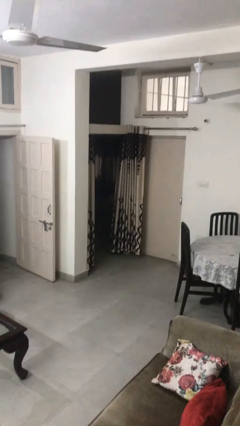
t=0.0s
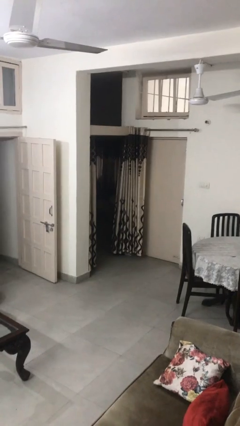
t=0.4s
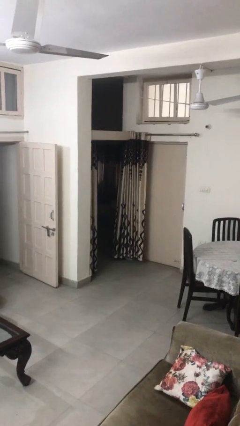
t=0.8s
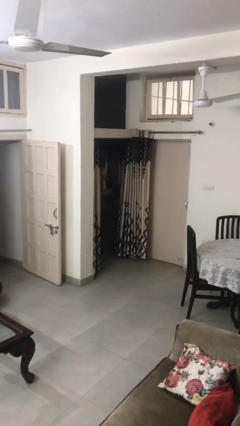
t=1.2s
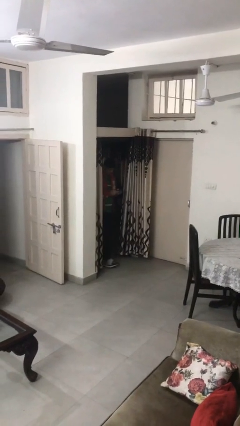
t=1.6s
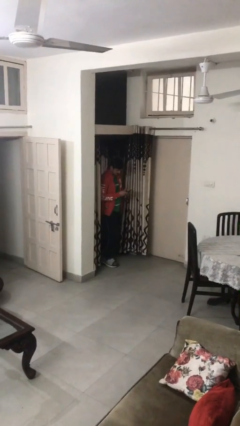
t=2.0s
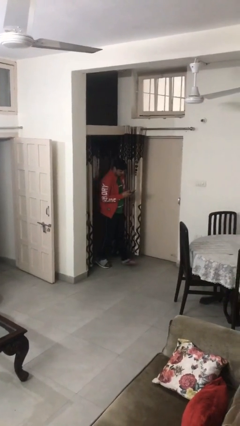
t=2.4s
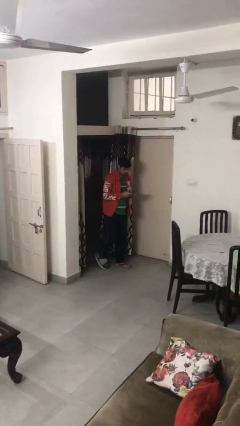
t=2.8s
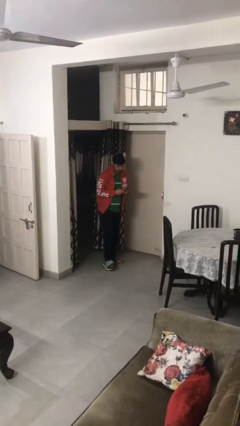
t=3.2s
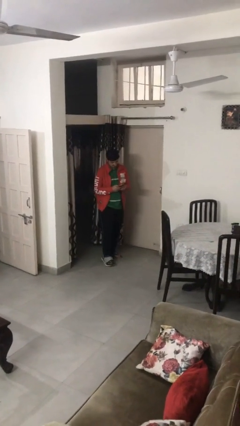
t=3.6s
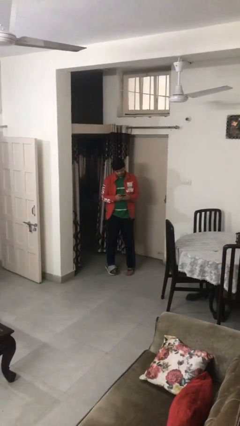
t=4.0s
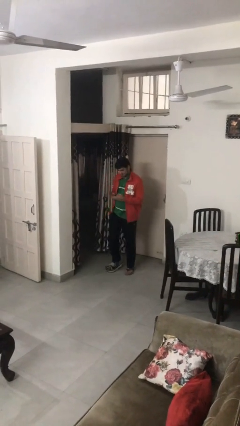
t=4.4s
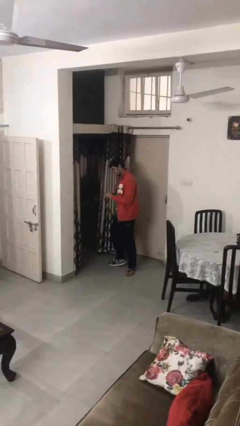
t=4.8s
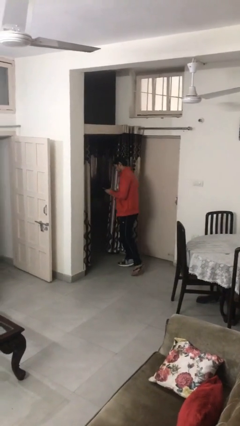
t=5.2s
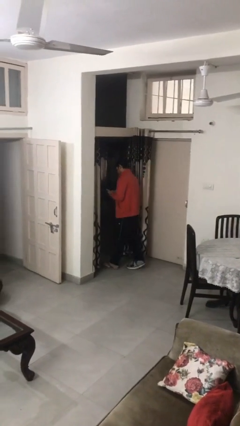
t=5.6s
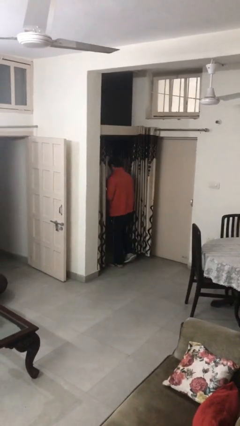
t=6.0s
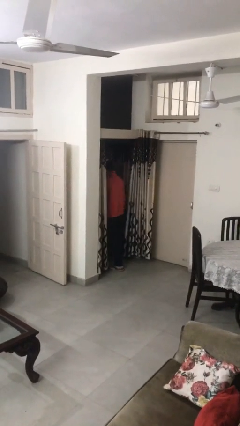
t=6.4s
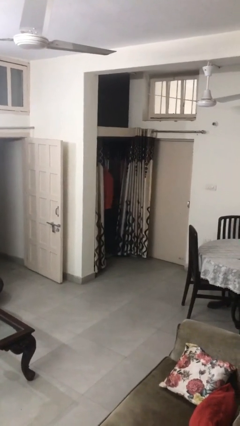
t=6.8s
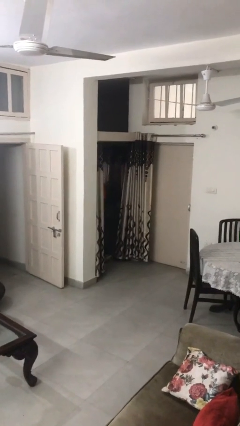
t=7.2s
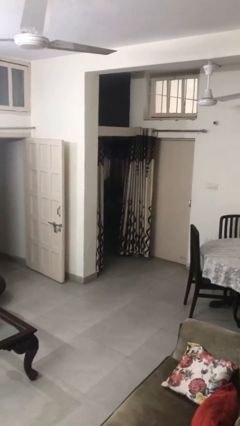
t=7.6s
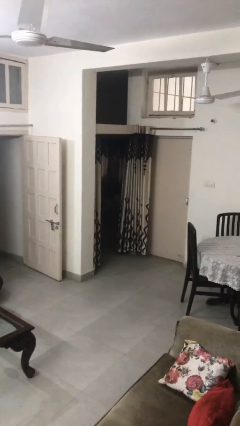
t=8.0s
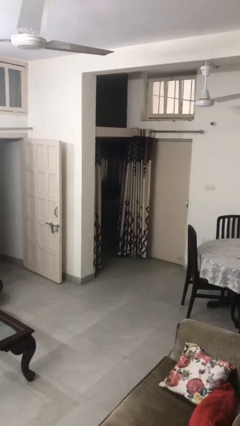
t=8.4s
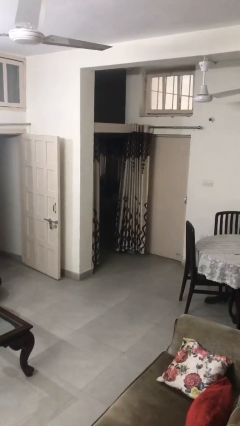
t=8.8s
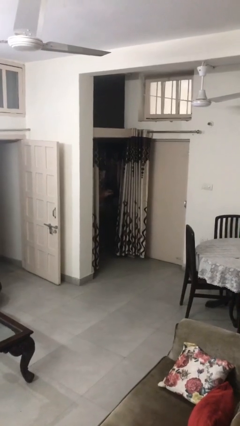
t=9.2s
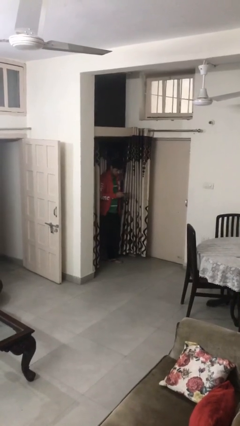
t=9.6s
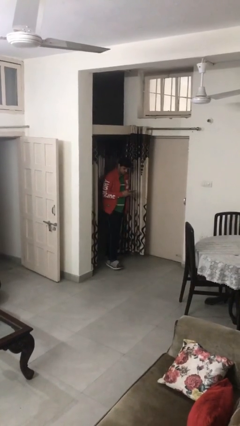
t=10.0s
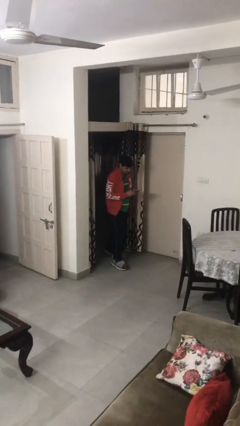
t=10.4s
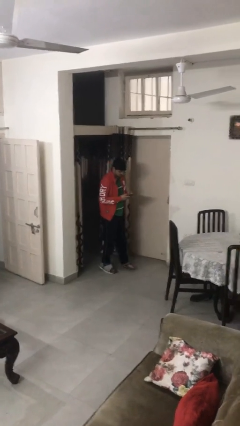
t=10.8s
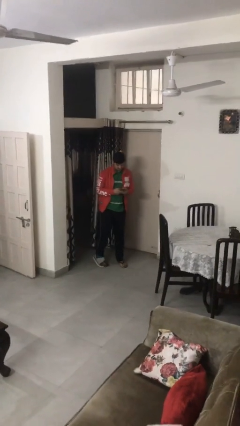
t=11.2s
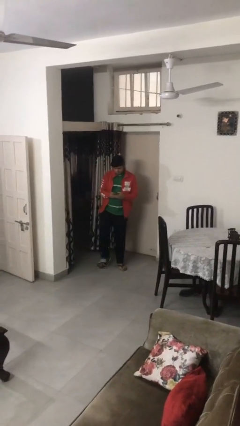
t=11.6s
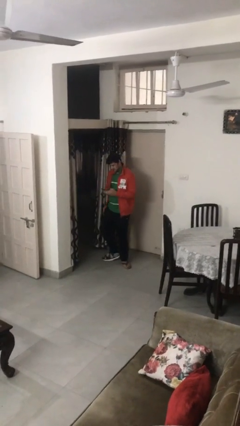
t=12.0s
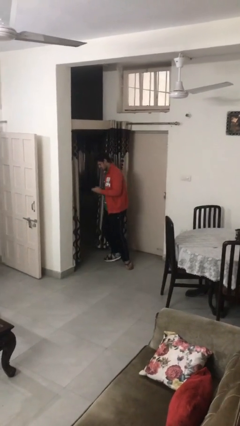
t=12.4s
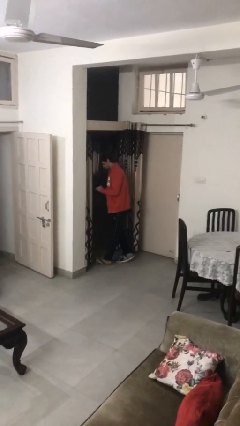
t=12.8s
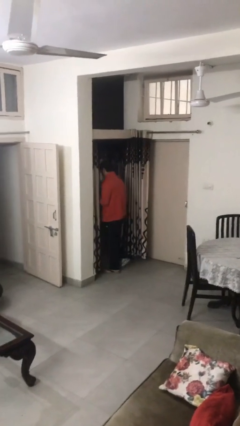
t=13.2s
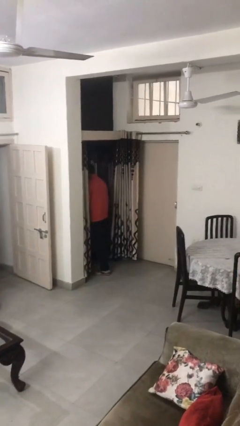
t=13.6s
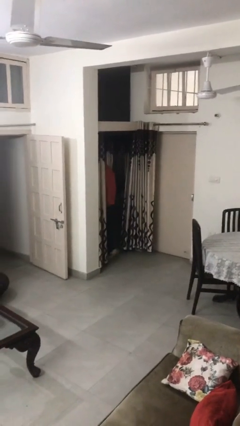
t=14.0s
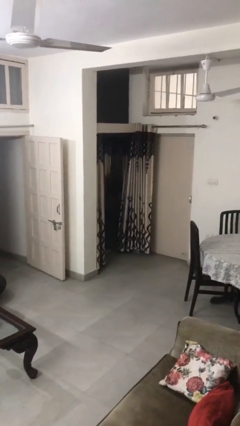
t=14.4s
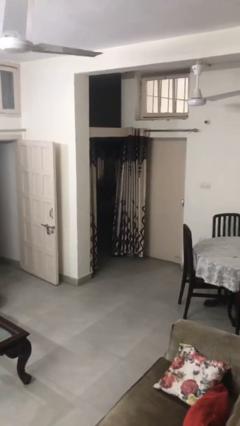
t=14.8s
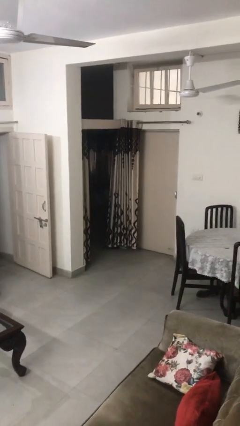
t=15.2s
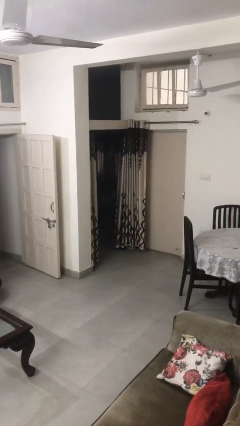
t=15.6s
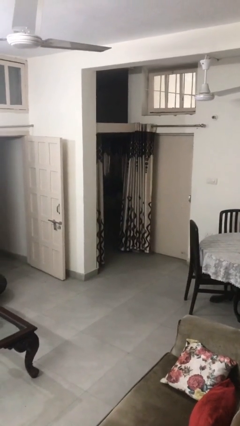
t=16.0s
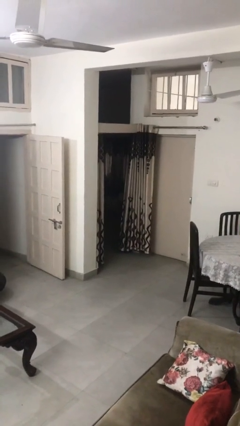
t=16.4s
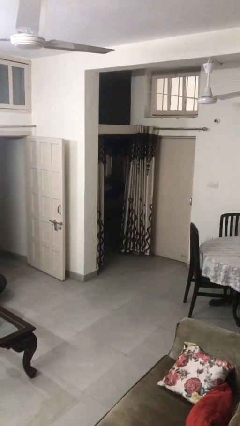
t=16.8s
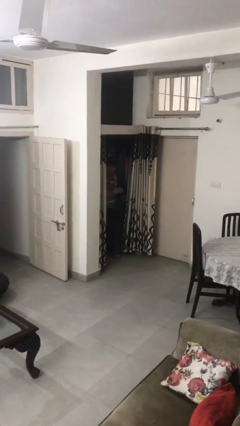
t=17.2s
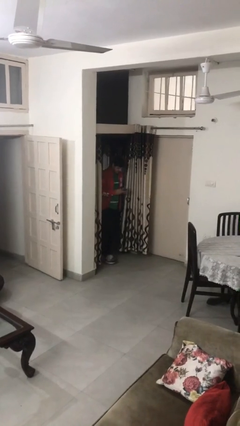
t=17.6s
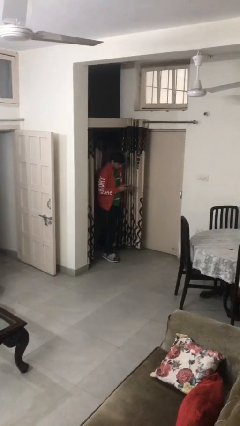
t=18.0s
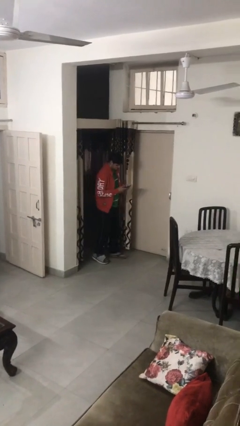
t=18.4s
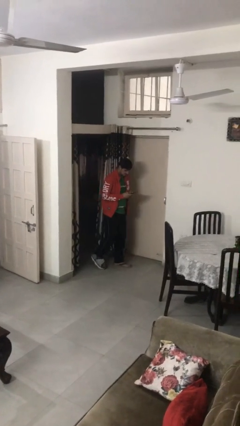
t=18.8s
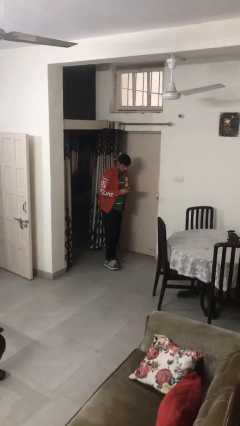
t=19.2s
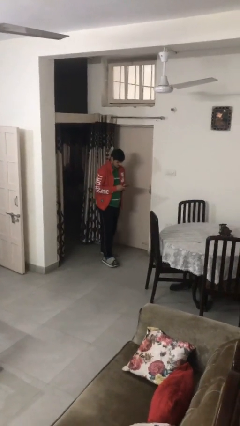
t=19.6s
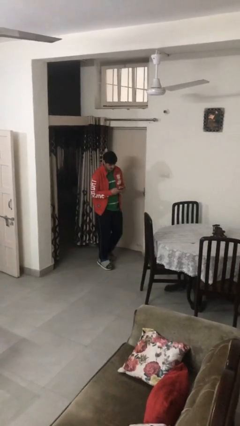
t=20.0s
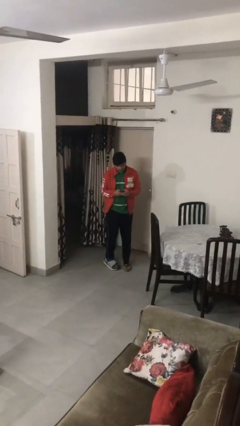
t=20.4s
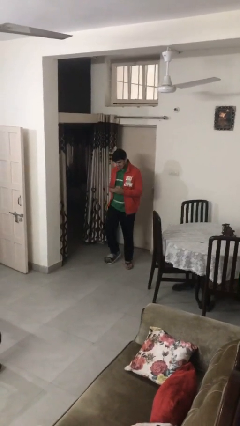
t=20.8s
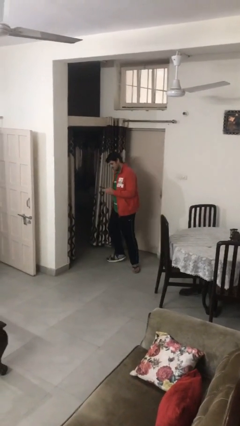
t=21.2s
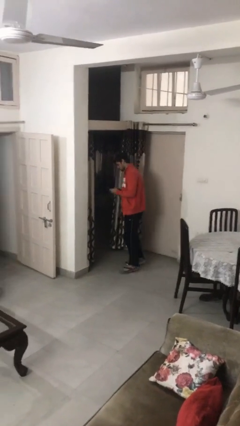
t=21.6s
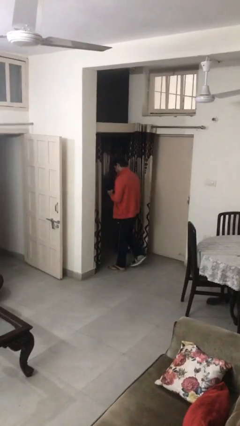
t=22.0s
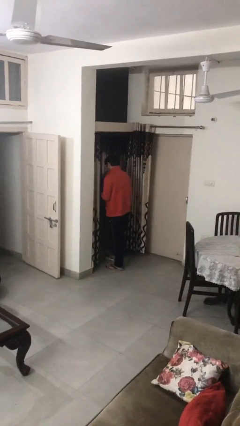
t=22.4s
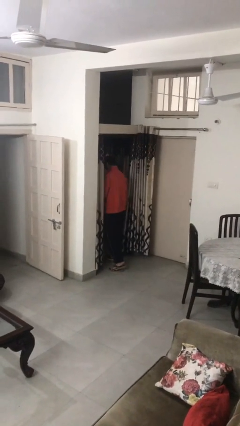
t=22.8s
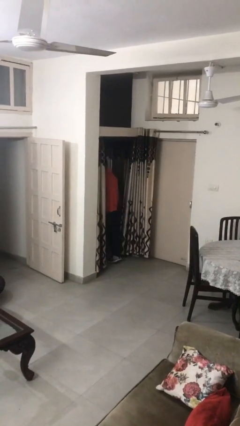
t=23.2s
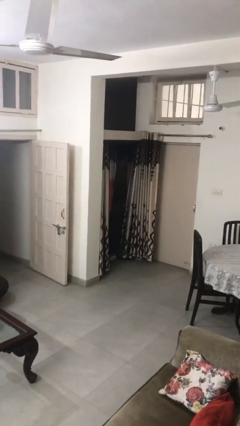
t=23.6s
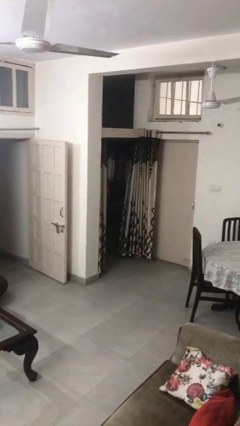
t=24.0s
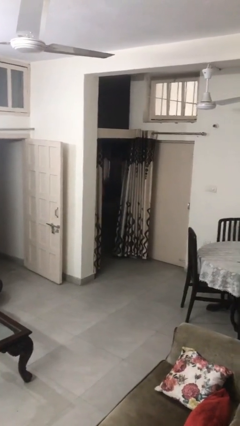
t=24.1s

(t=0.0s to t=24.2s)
person texts on phone

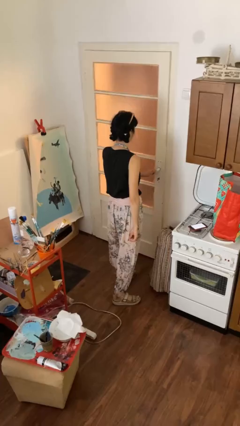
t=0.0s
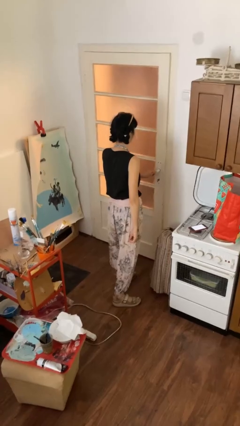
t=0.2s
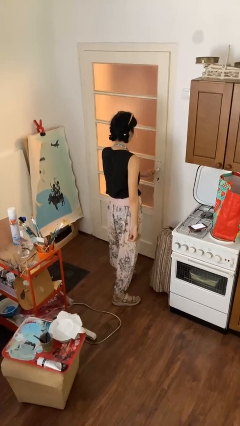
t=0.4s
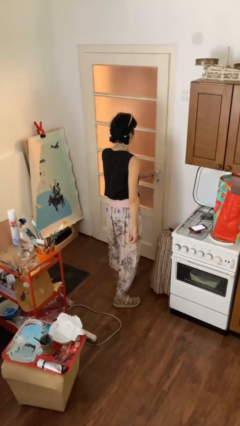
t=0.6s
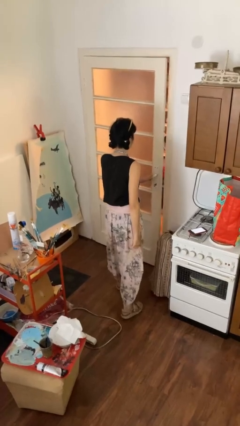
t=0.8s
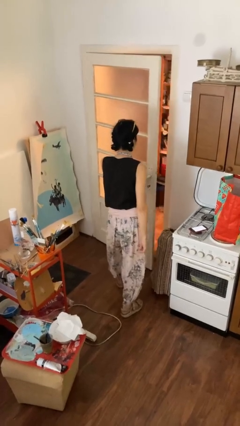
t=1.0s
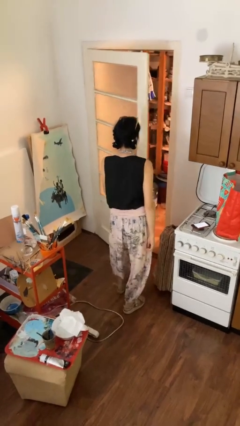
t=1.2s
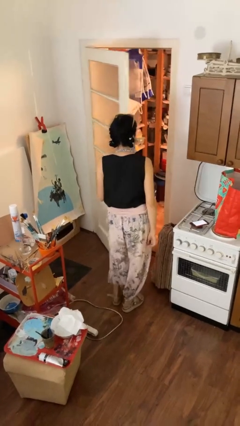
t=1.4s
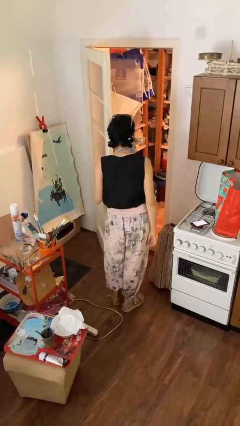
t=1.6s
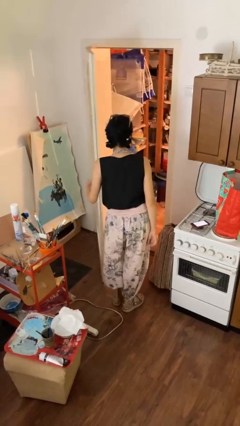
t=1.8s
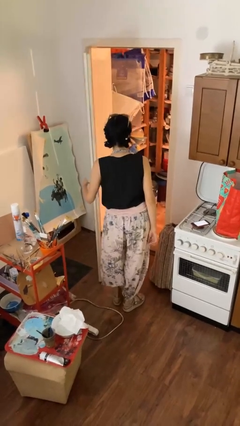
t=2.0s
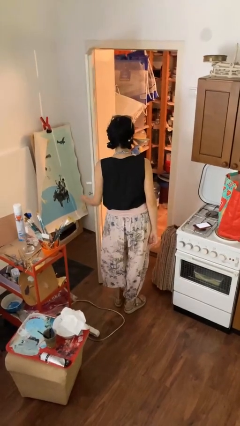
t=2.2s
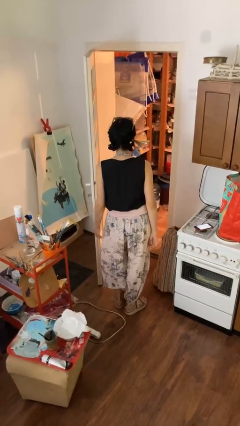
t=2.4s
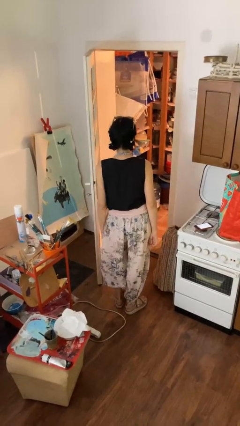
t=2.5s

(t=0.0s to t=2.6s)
person opens facility door

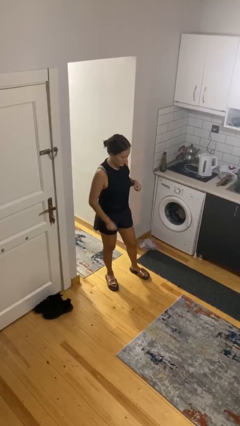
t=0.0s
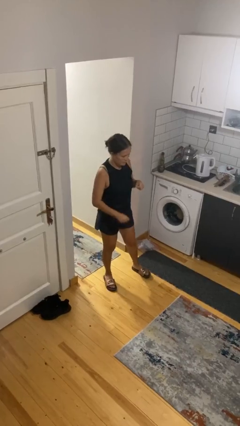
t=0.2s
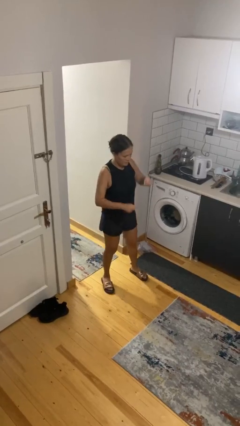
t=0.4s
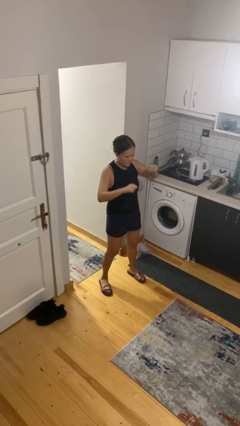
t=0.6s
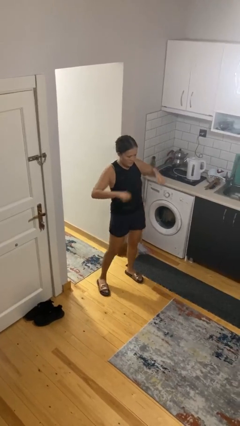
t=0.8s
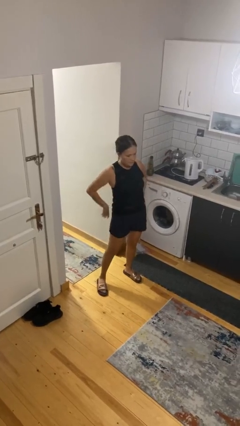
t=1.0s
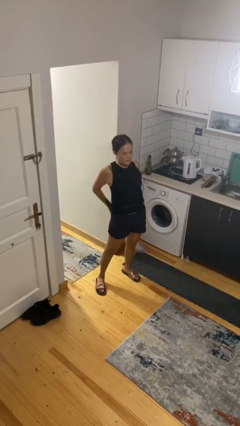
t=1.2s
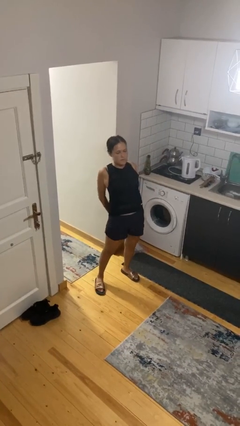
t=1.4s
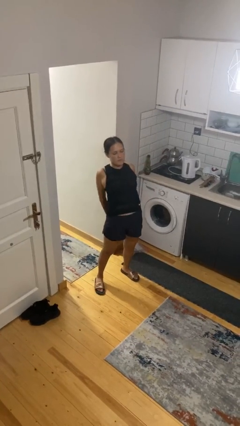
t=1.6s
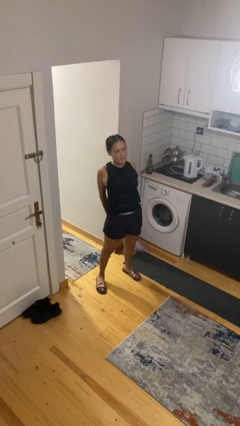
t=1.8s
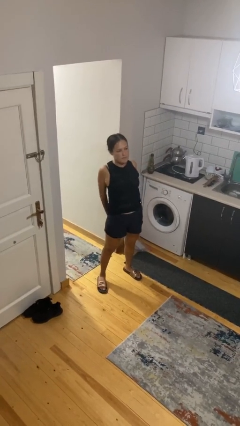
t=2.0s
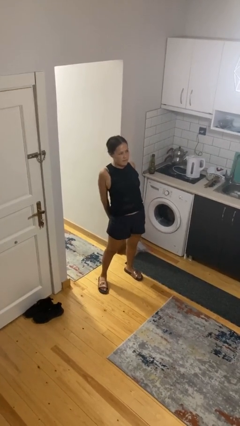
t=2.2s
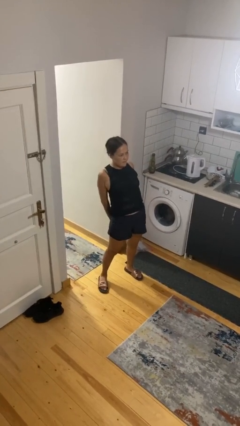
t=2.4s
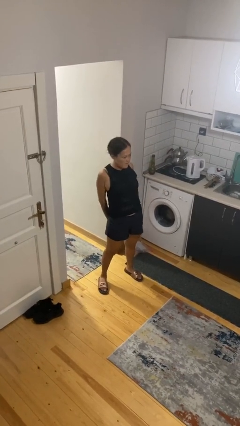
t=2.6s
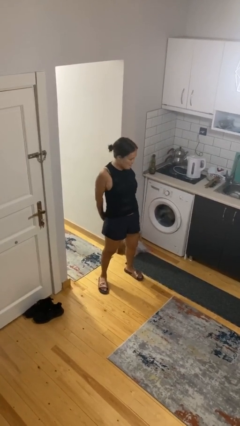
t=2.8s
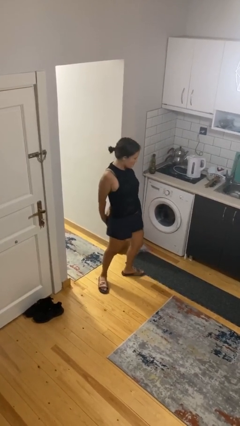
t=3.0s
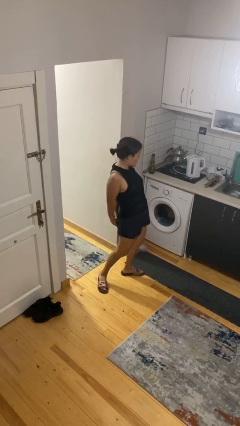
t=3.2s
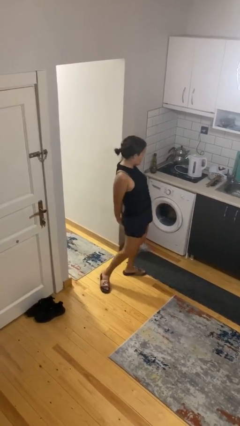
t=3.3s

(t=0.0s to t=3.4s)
person stretches back
